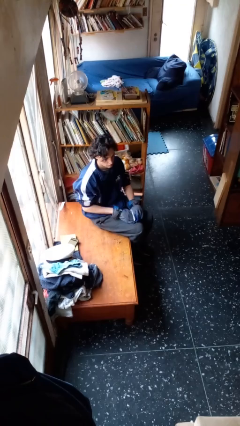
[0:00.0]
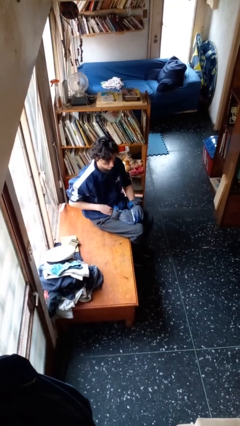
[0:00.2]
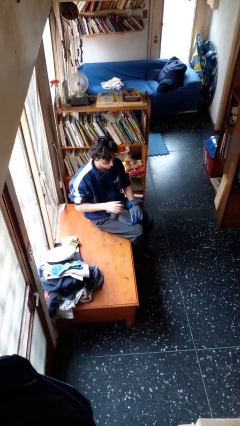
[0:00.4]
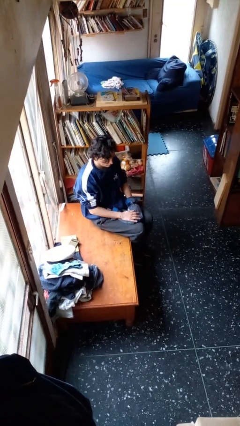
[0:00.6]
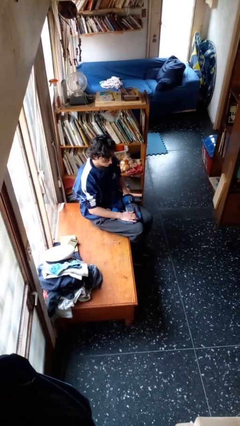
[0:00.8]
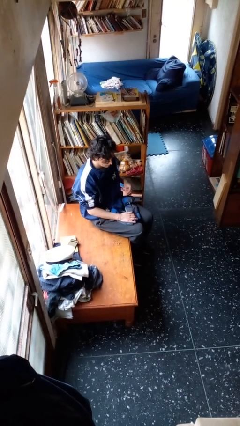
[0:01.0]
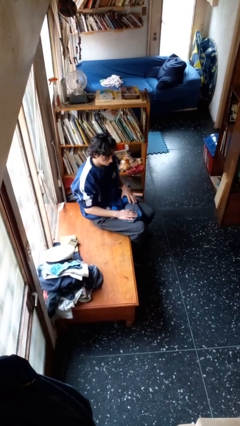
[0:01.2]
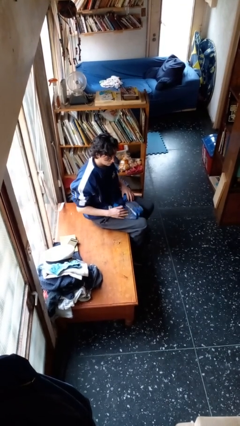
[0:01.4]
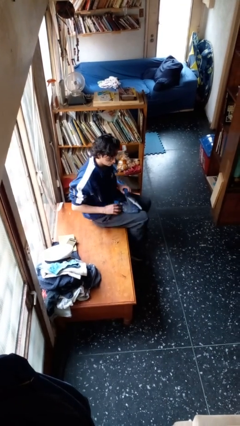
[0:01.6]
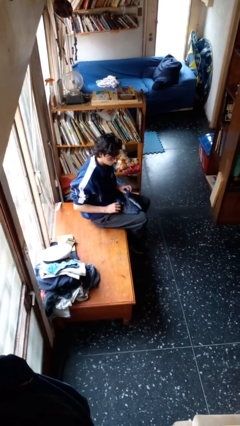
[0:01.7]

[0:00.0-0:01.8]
person takes off gloves

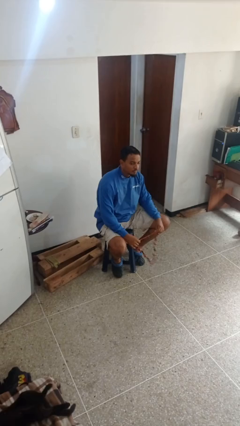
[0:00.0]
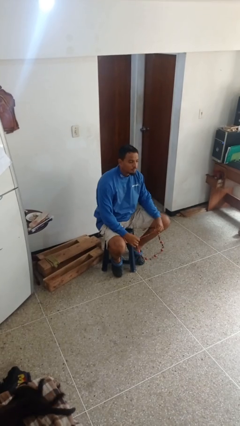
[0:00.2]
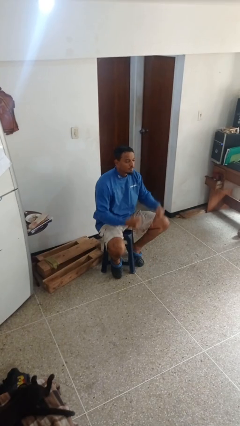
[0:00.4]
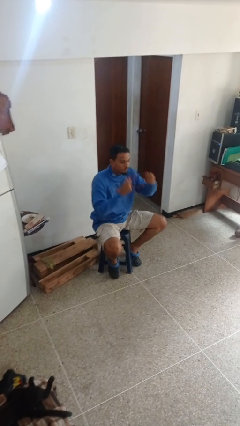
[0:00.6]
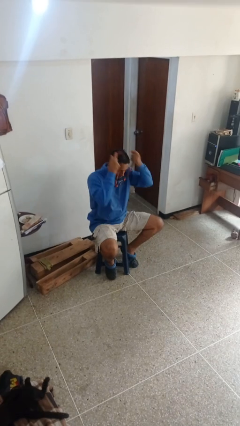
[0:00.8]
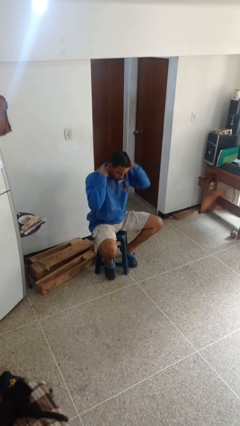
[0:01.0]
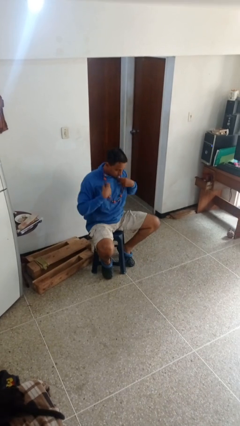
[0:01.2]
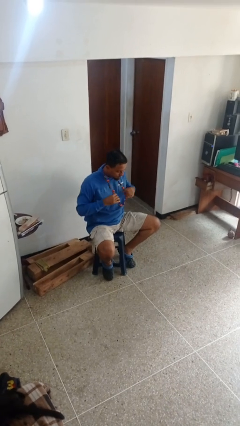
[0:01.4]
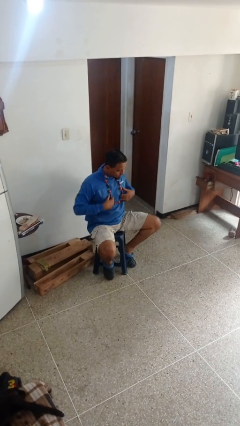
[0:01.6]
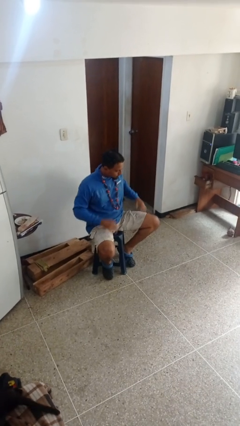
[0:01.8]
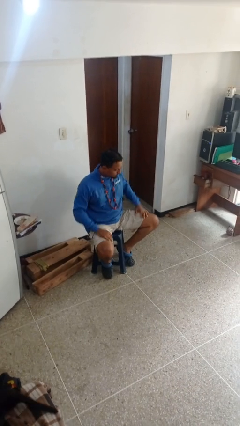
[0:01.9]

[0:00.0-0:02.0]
person puts on necklace

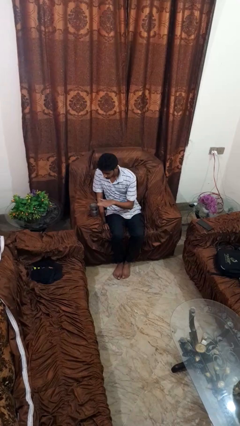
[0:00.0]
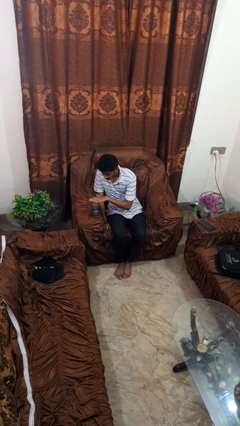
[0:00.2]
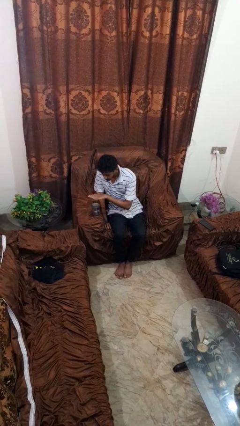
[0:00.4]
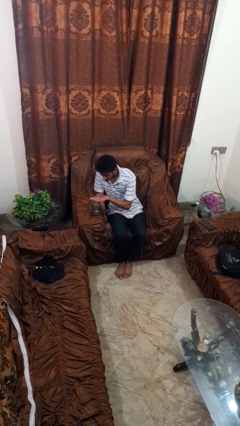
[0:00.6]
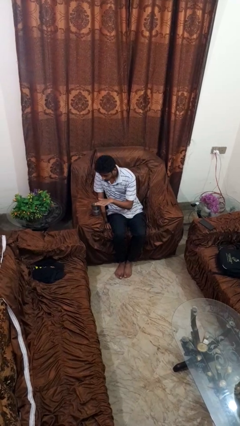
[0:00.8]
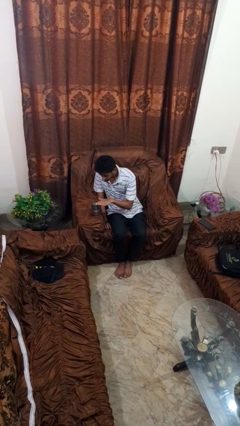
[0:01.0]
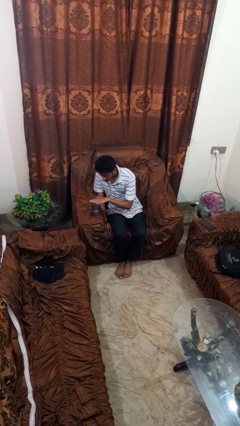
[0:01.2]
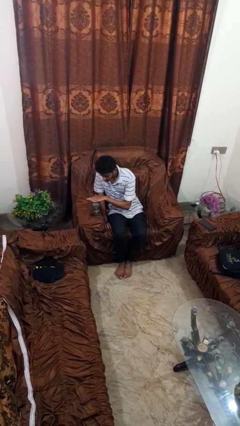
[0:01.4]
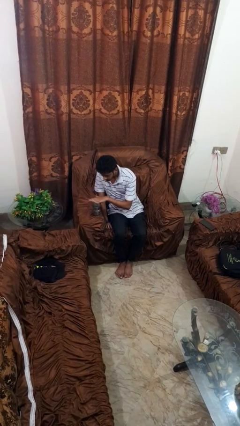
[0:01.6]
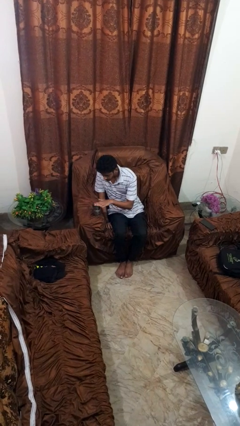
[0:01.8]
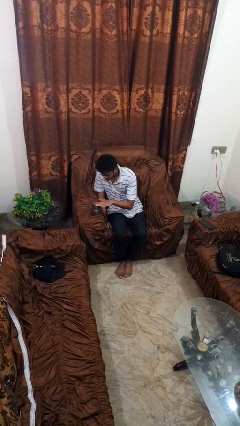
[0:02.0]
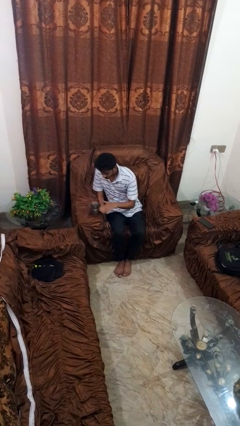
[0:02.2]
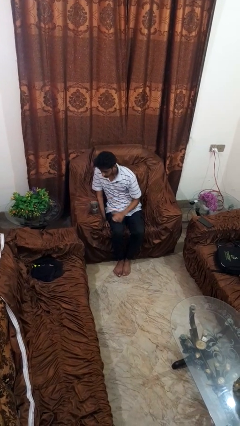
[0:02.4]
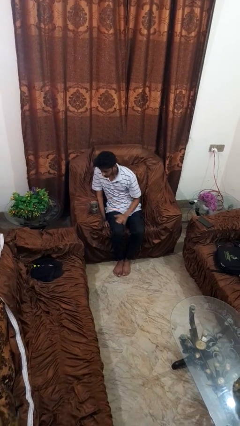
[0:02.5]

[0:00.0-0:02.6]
person waves hand over object

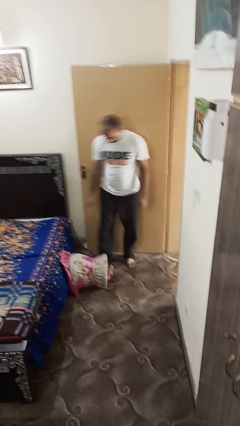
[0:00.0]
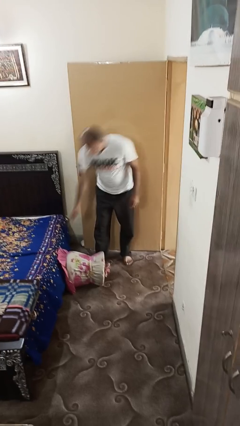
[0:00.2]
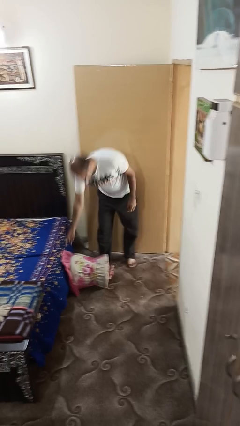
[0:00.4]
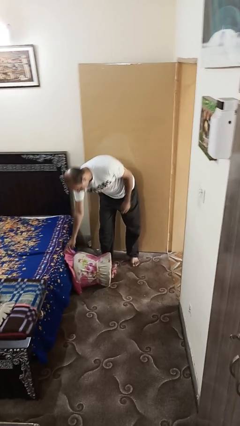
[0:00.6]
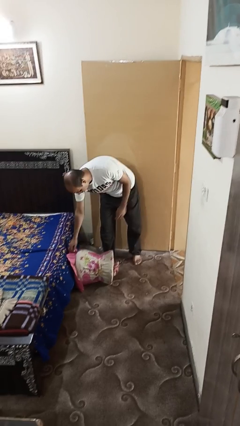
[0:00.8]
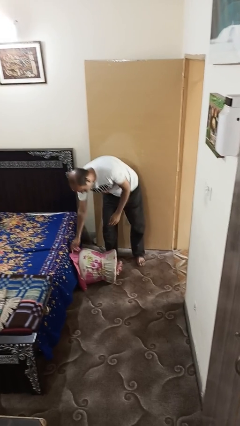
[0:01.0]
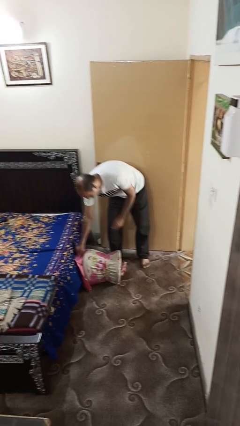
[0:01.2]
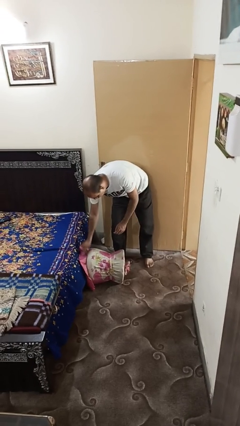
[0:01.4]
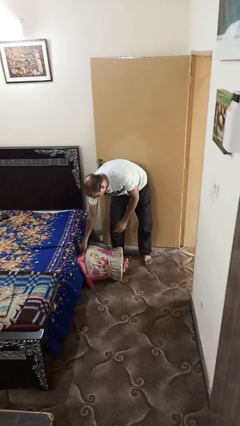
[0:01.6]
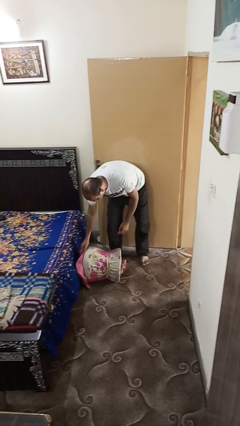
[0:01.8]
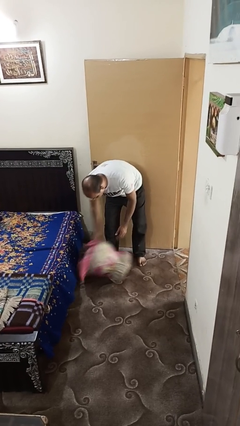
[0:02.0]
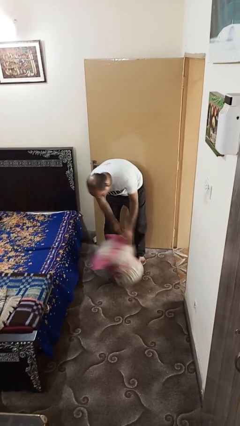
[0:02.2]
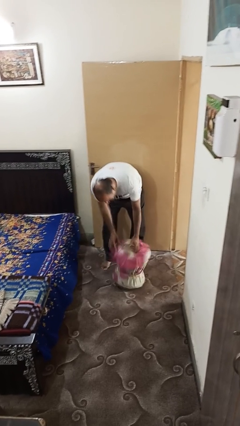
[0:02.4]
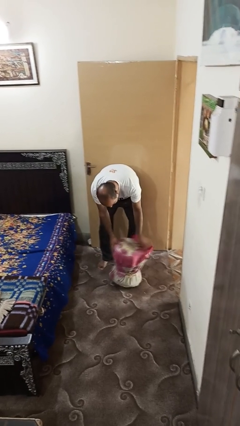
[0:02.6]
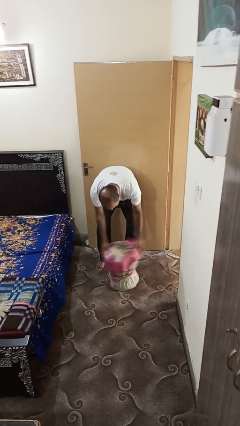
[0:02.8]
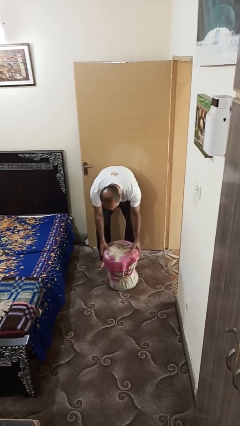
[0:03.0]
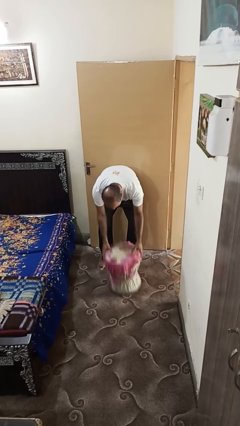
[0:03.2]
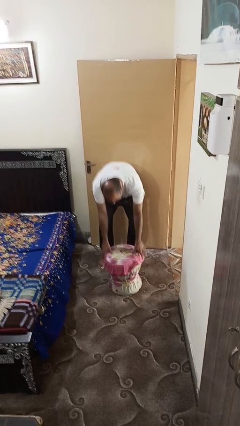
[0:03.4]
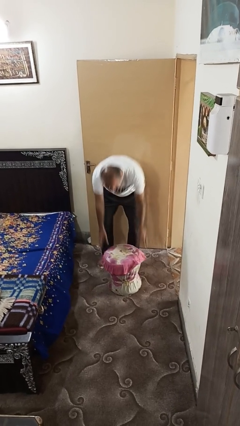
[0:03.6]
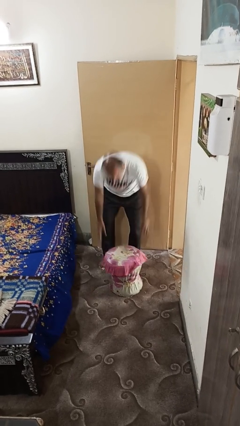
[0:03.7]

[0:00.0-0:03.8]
person sets upright furniture

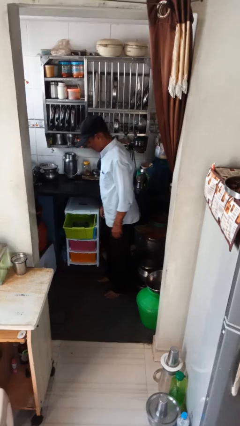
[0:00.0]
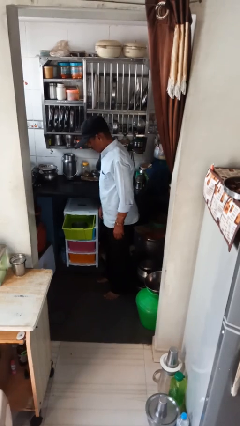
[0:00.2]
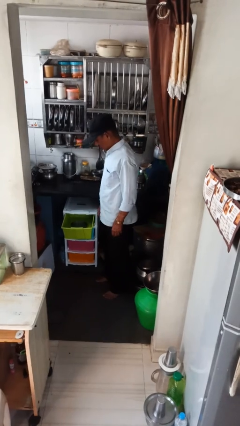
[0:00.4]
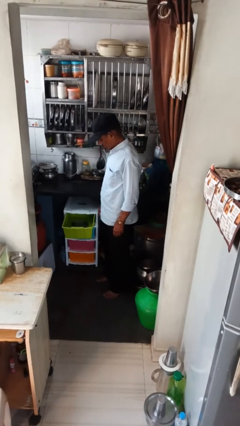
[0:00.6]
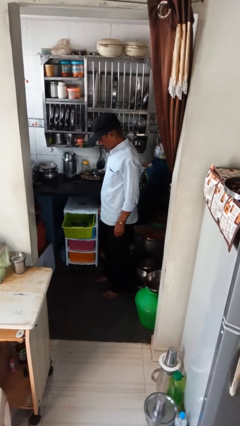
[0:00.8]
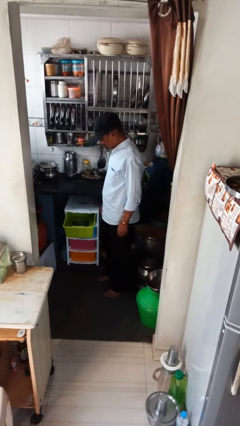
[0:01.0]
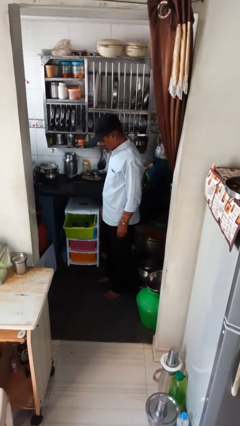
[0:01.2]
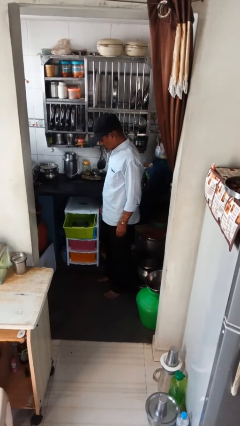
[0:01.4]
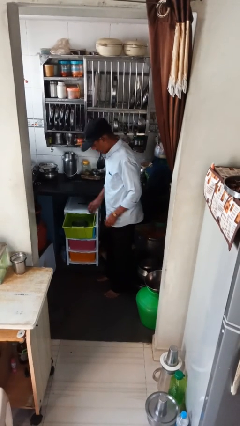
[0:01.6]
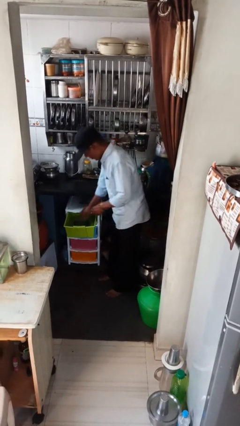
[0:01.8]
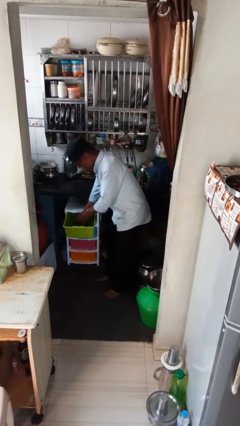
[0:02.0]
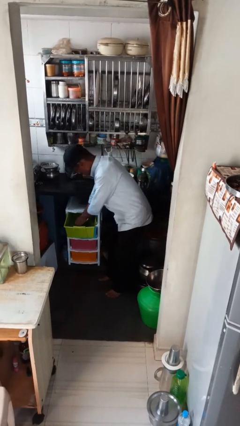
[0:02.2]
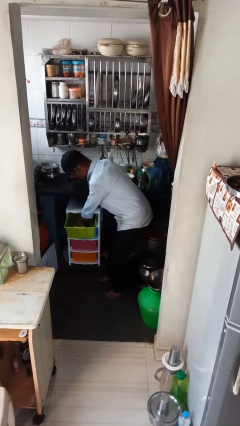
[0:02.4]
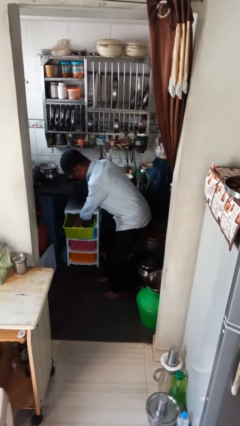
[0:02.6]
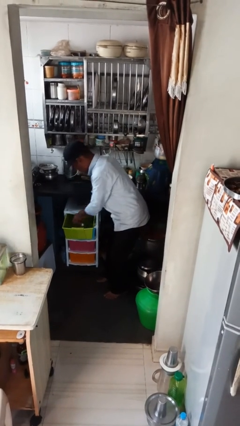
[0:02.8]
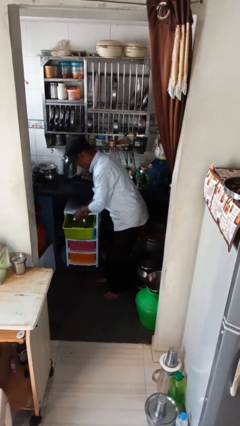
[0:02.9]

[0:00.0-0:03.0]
person takes object from cabinet

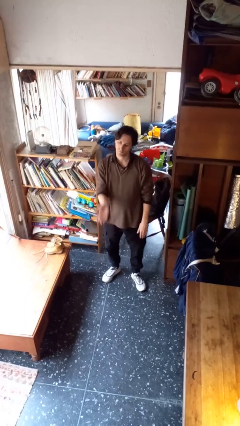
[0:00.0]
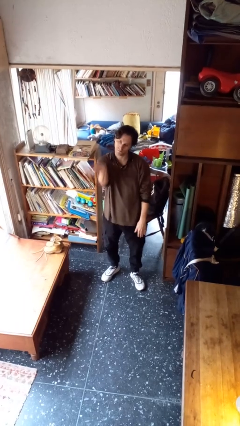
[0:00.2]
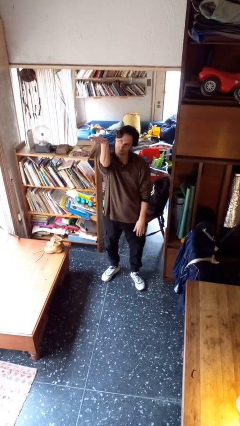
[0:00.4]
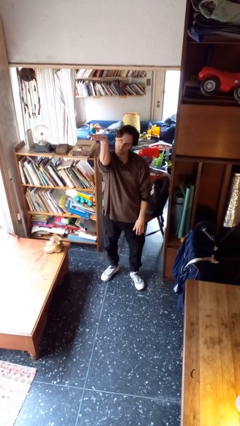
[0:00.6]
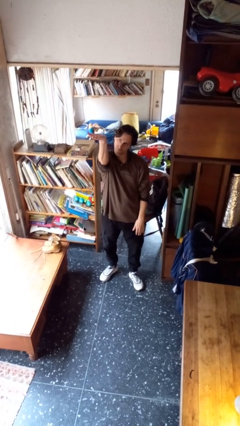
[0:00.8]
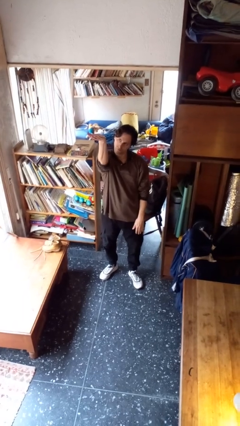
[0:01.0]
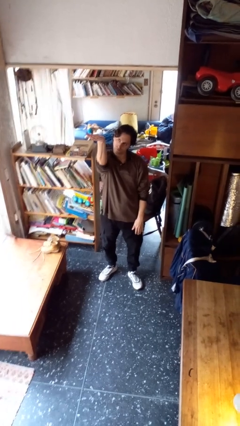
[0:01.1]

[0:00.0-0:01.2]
person gestures swipe up

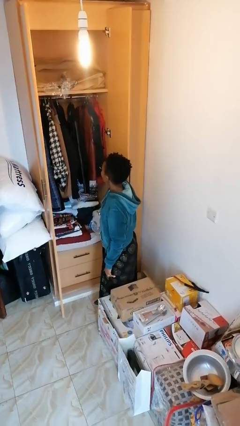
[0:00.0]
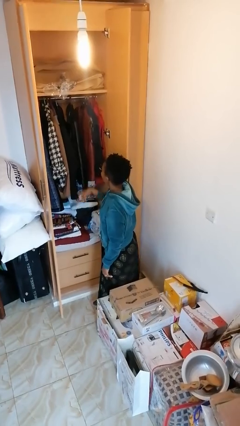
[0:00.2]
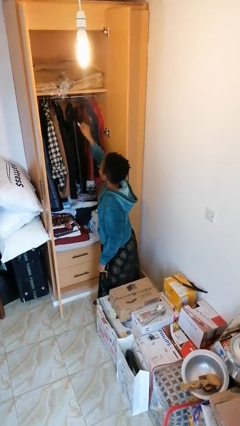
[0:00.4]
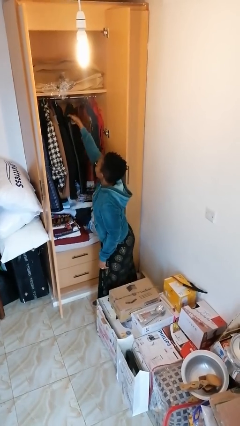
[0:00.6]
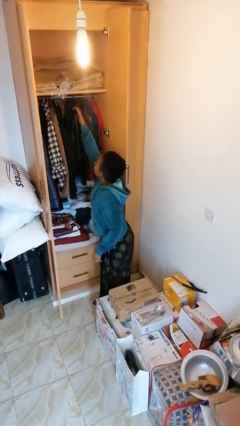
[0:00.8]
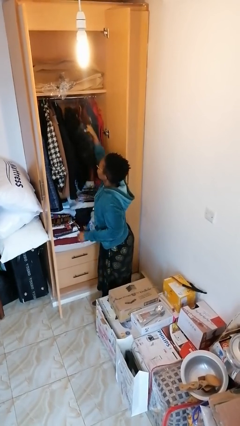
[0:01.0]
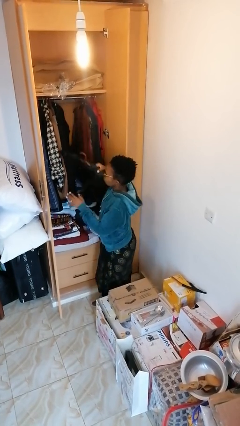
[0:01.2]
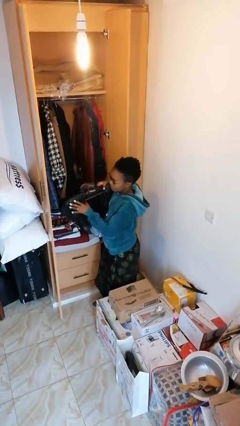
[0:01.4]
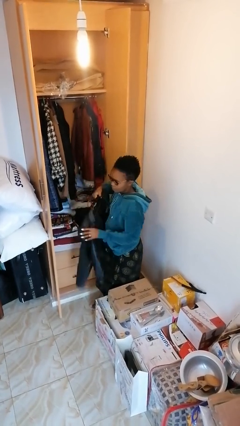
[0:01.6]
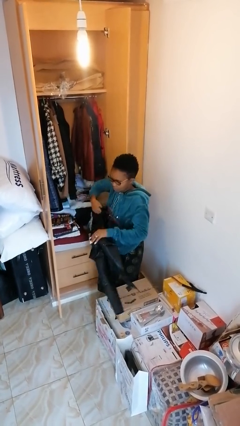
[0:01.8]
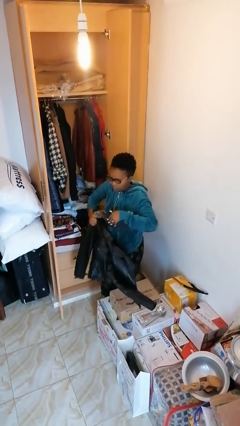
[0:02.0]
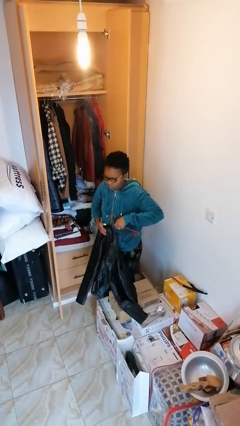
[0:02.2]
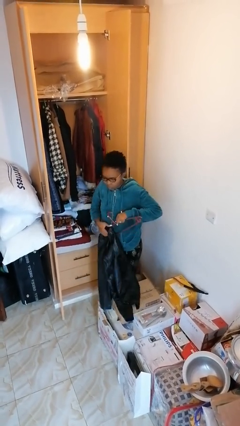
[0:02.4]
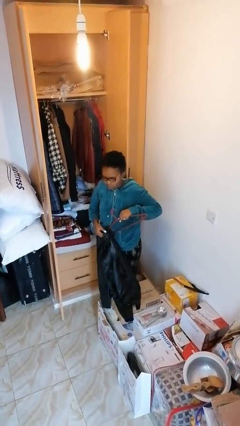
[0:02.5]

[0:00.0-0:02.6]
person takes clothes from closet
